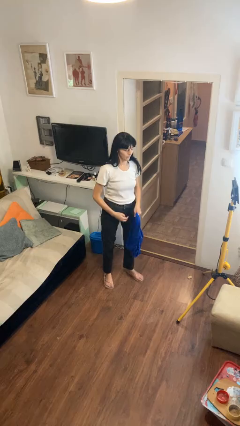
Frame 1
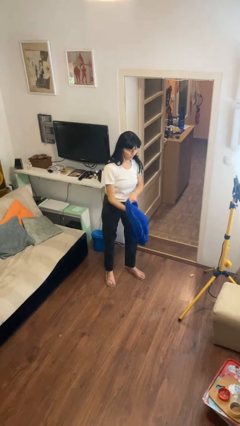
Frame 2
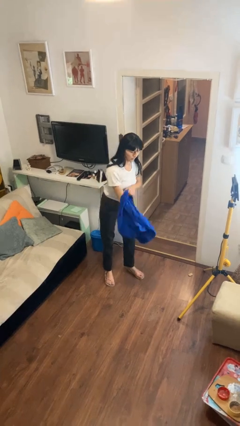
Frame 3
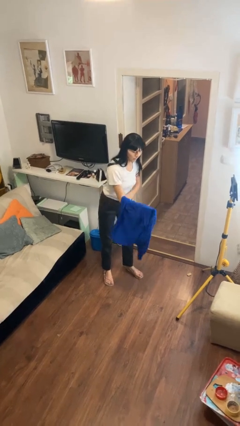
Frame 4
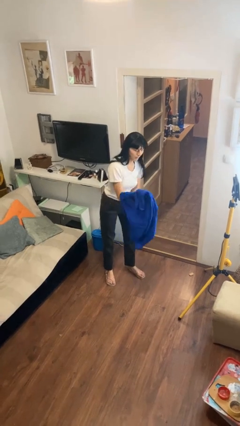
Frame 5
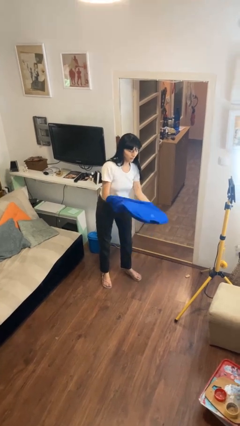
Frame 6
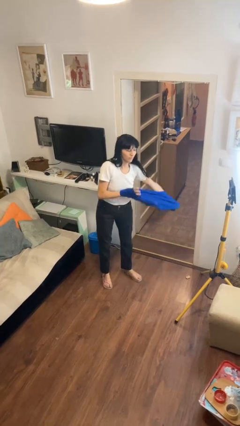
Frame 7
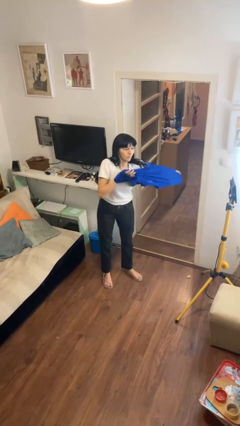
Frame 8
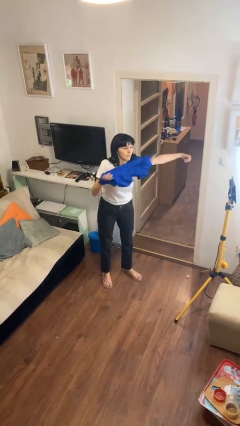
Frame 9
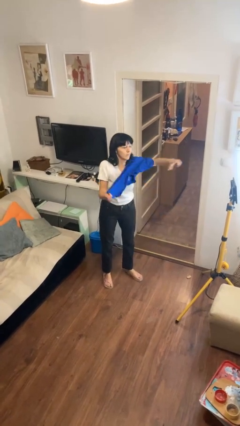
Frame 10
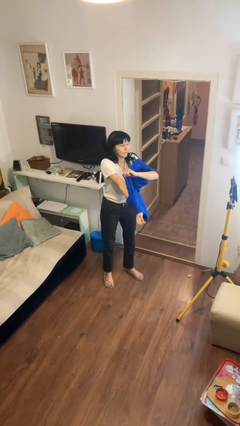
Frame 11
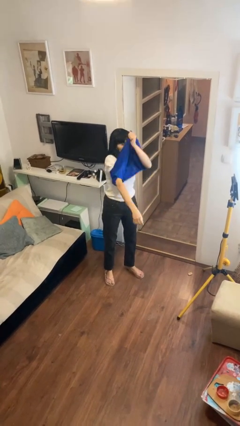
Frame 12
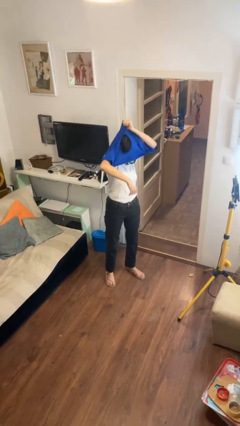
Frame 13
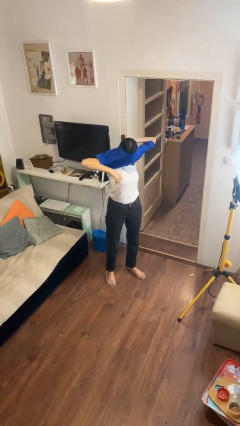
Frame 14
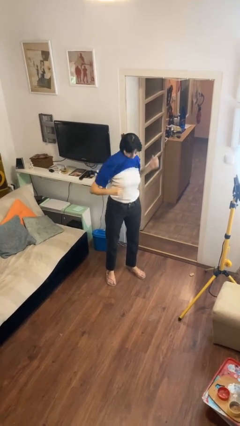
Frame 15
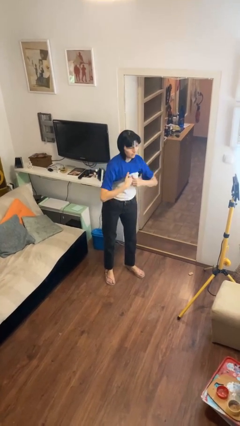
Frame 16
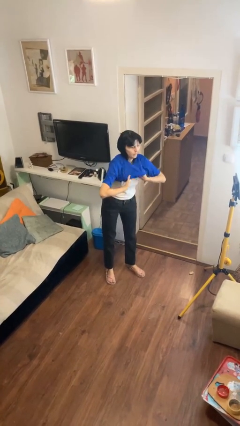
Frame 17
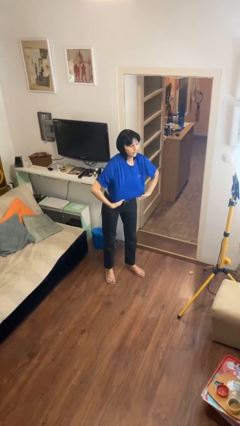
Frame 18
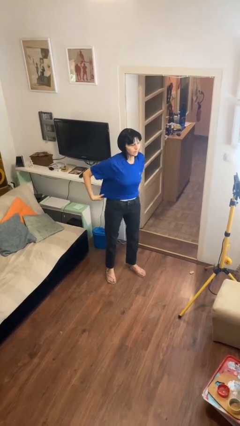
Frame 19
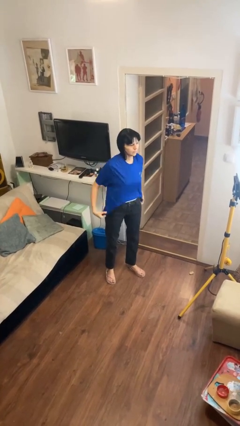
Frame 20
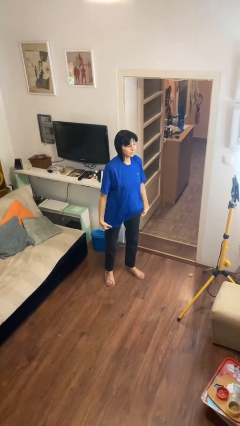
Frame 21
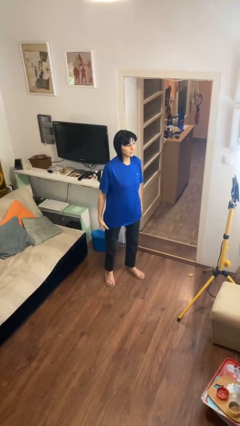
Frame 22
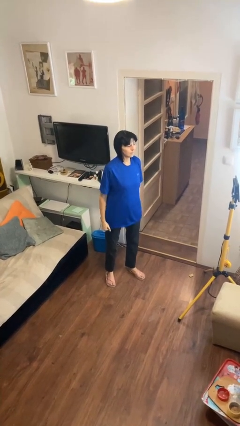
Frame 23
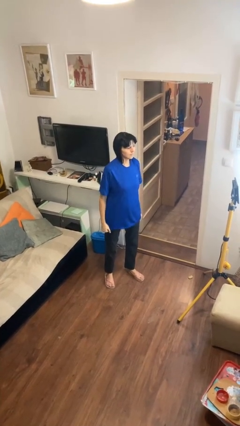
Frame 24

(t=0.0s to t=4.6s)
person puts on shirt

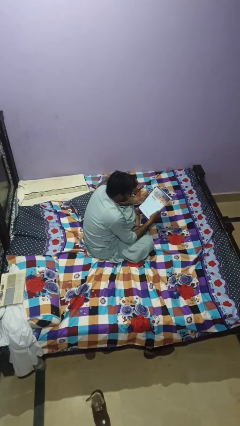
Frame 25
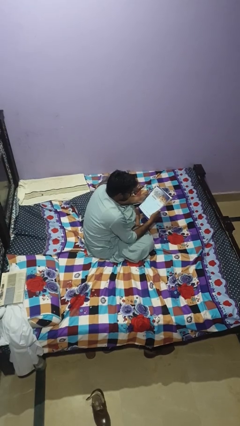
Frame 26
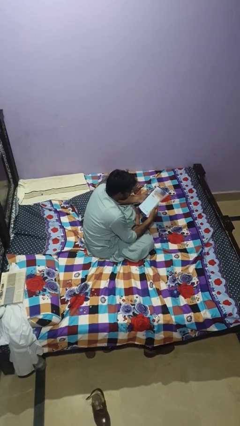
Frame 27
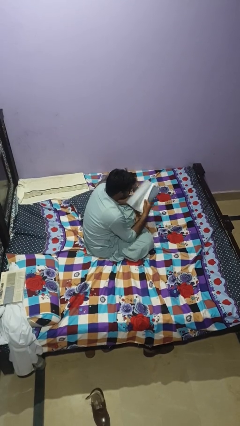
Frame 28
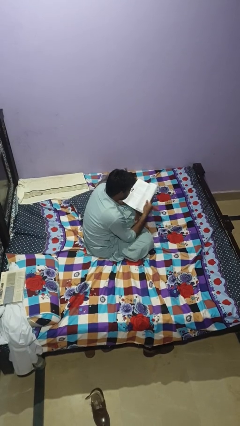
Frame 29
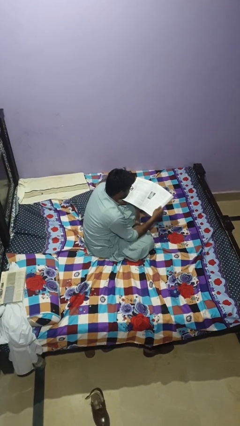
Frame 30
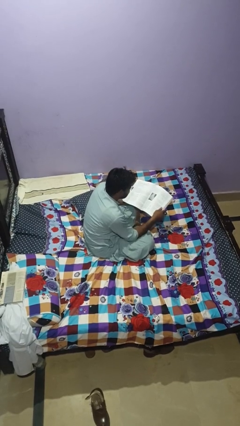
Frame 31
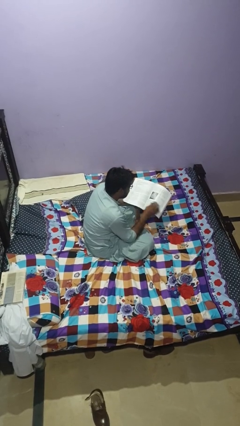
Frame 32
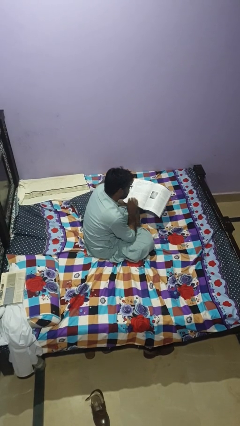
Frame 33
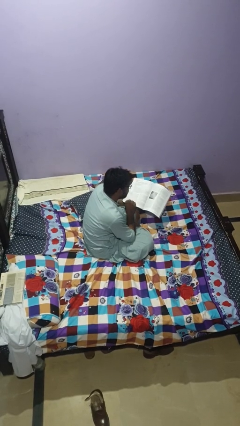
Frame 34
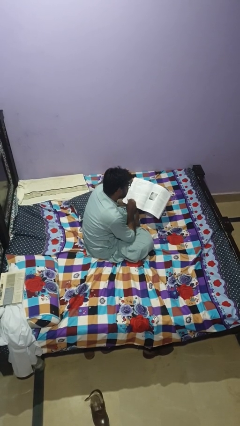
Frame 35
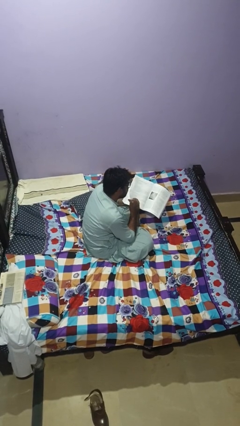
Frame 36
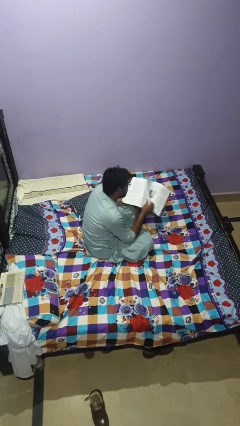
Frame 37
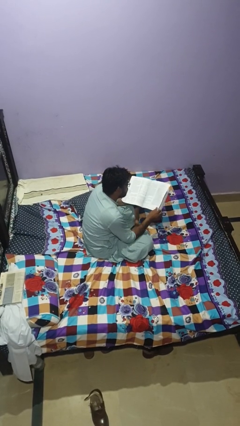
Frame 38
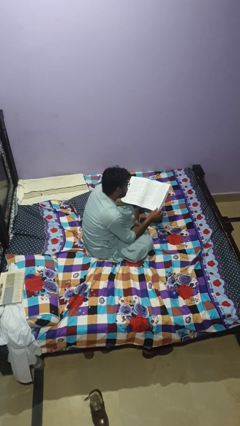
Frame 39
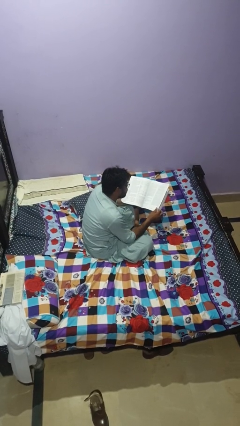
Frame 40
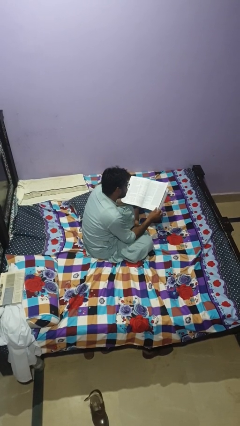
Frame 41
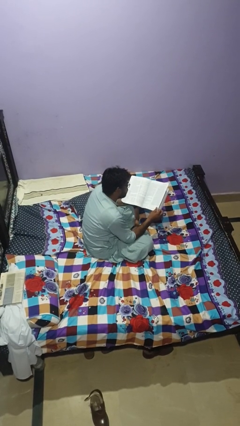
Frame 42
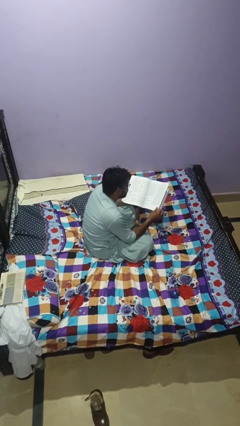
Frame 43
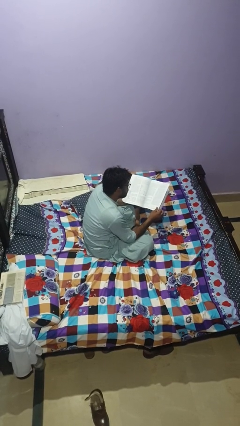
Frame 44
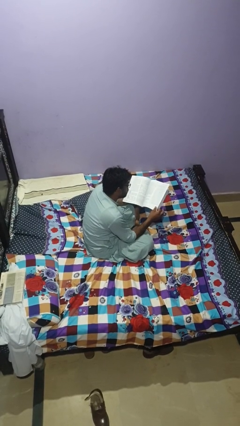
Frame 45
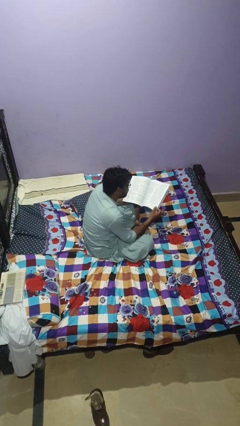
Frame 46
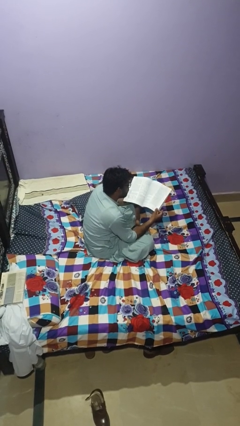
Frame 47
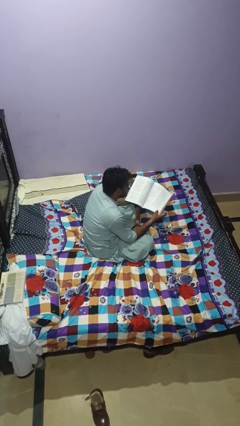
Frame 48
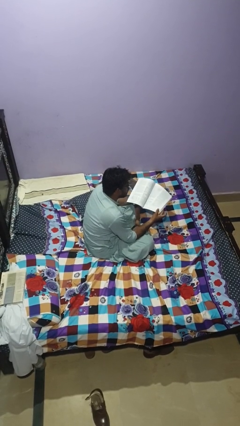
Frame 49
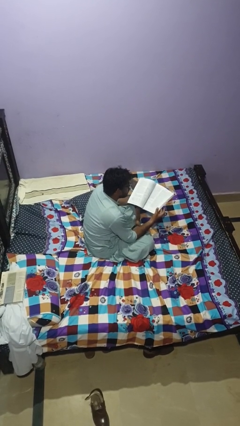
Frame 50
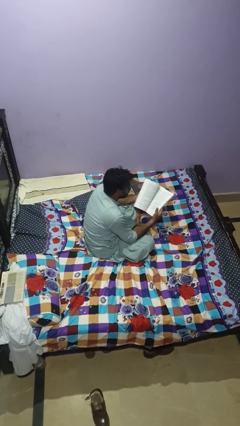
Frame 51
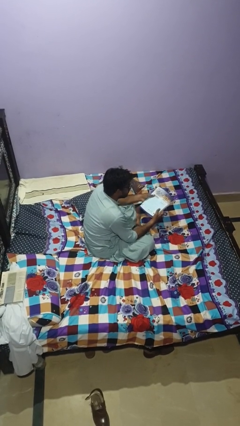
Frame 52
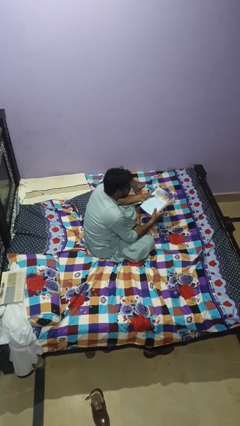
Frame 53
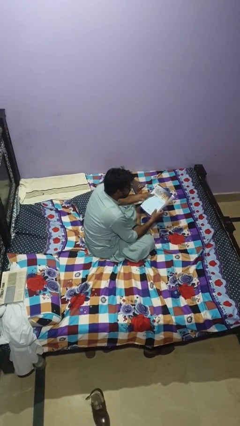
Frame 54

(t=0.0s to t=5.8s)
person reads magazine

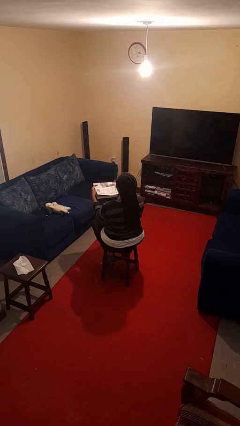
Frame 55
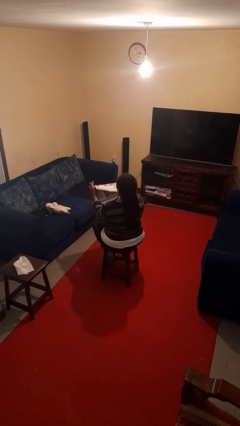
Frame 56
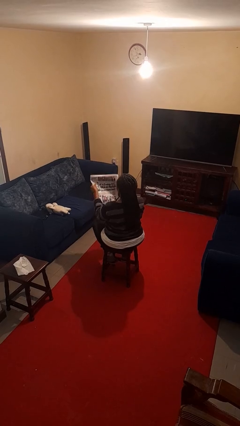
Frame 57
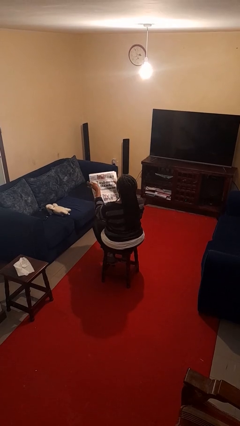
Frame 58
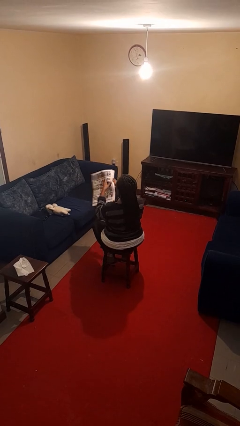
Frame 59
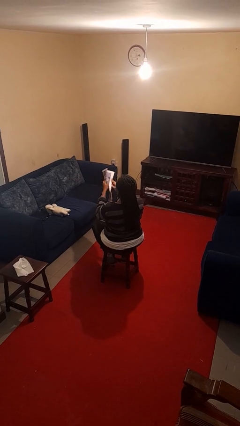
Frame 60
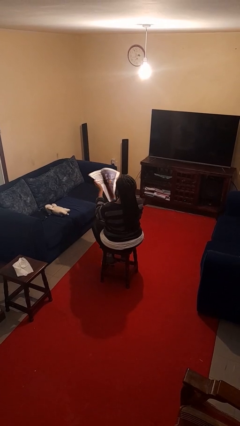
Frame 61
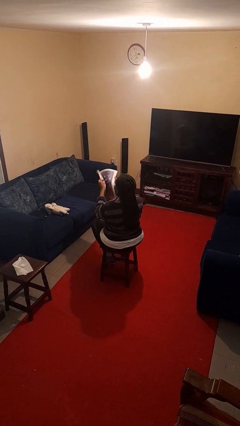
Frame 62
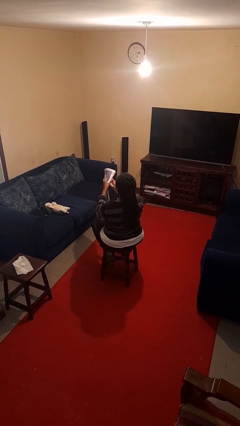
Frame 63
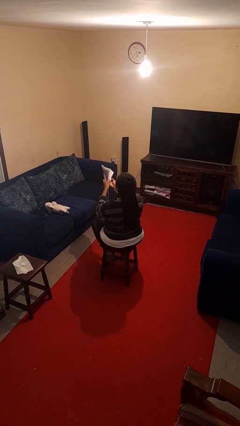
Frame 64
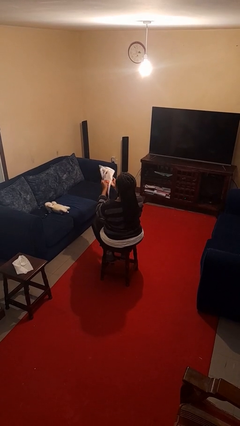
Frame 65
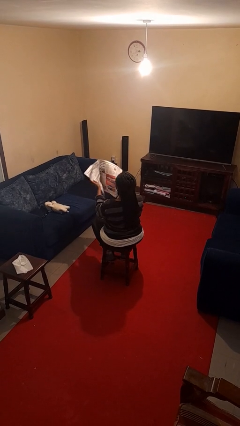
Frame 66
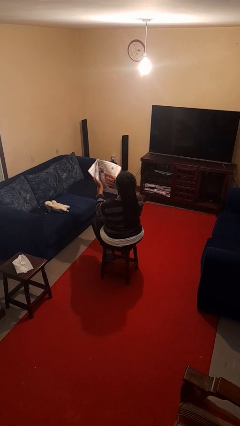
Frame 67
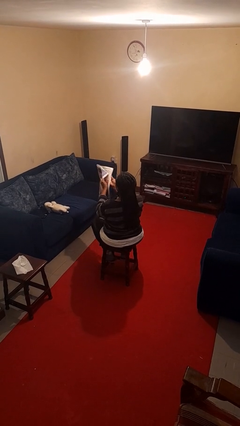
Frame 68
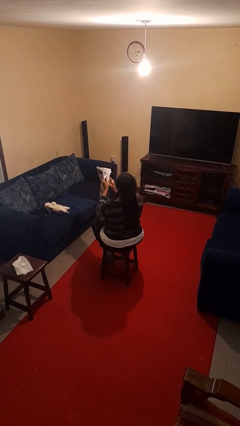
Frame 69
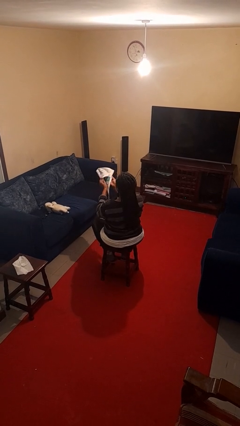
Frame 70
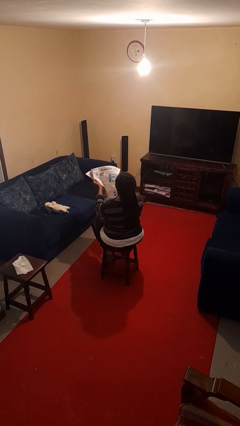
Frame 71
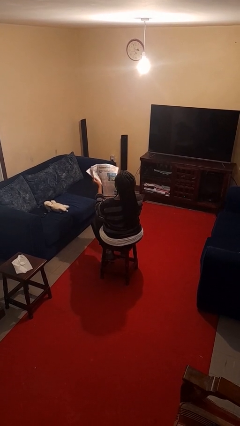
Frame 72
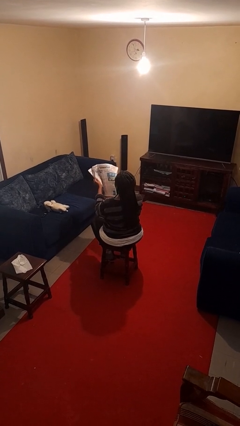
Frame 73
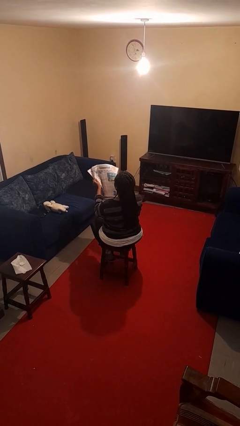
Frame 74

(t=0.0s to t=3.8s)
person reads newspaper

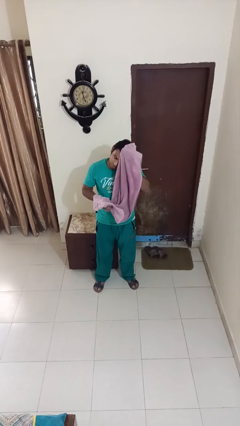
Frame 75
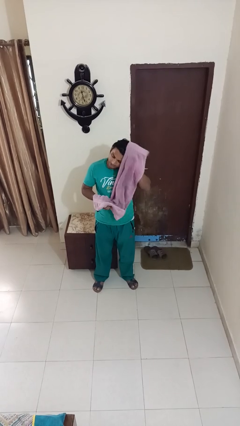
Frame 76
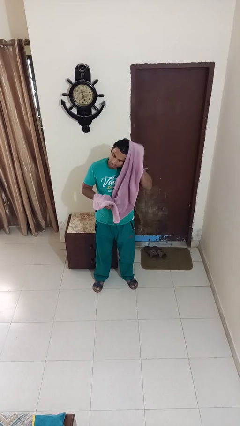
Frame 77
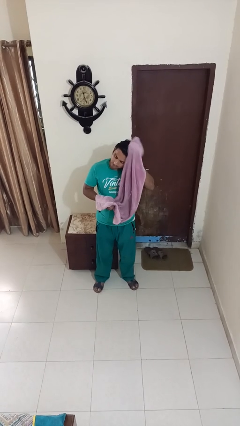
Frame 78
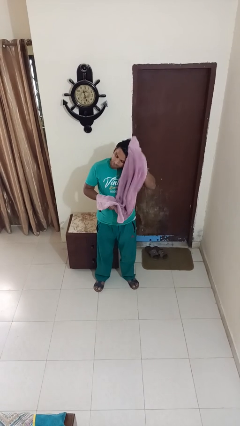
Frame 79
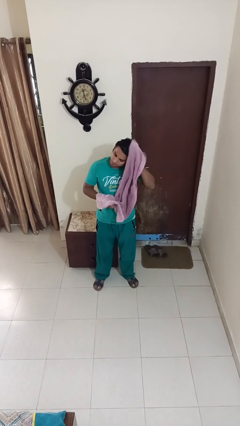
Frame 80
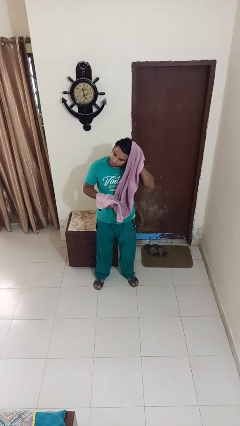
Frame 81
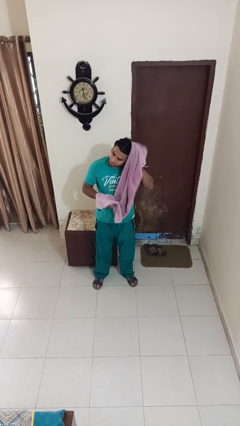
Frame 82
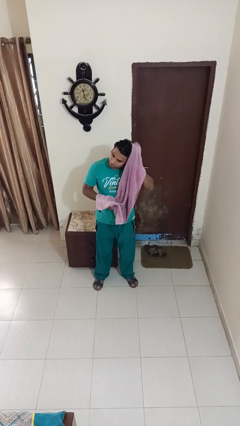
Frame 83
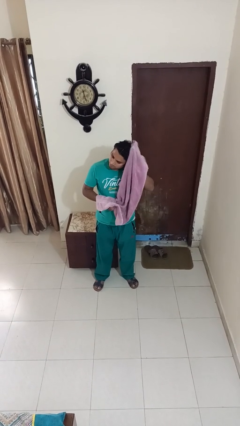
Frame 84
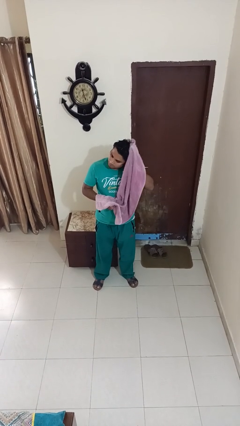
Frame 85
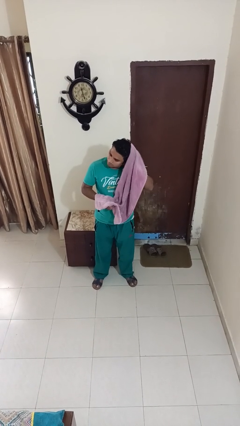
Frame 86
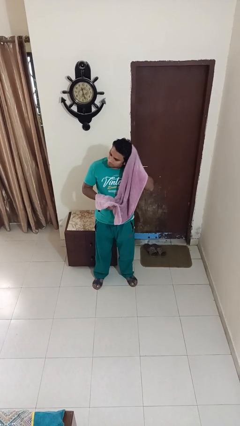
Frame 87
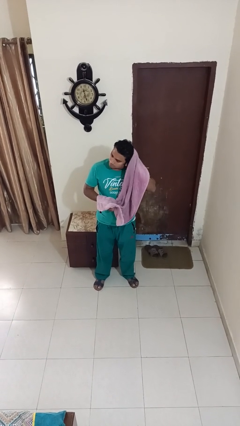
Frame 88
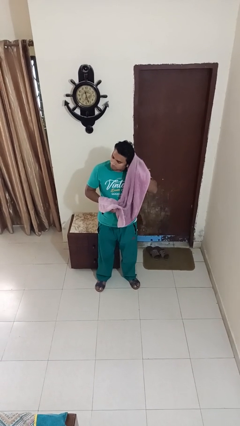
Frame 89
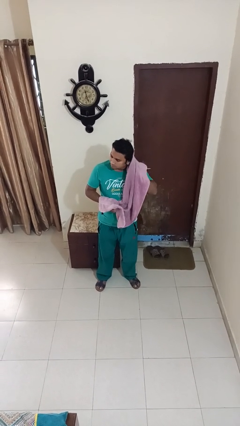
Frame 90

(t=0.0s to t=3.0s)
person dries hair with towel

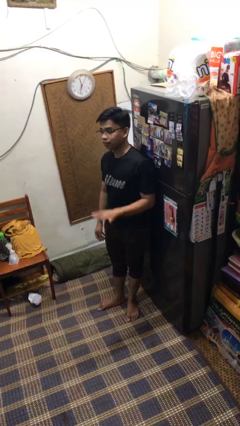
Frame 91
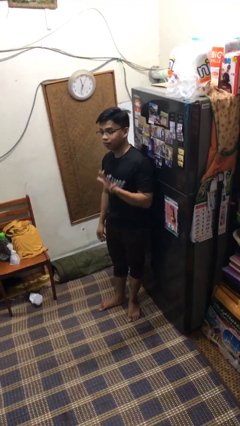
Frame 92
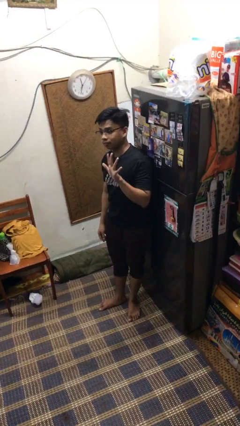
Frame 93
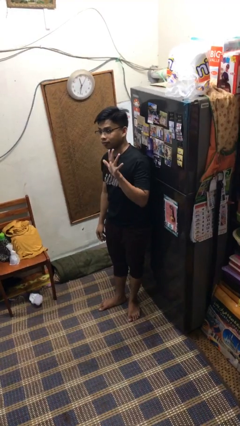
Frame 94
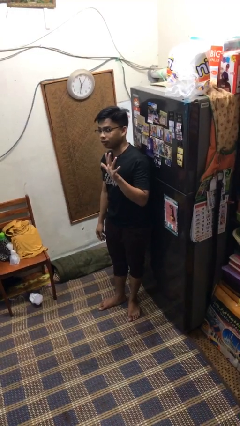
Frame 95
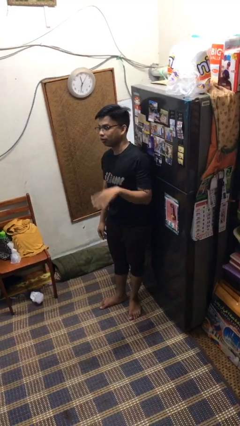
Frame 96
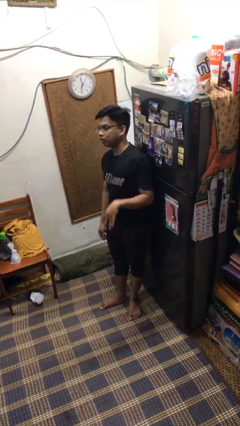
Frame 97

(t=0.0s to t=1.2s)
person gestures number five
